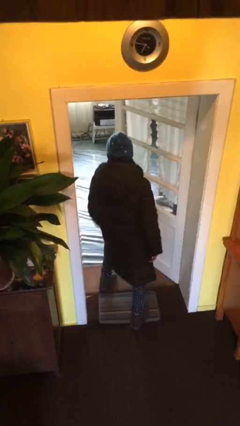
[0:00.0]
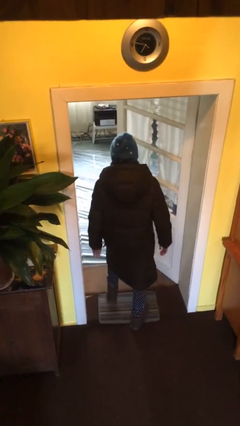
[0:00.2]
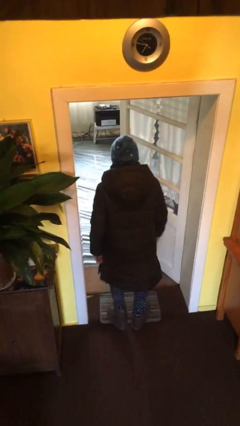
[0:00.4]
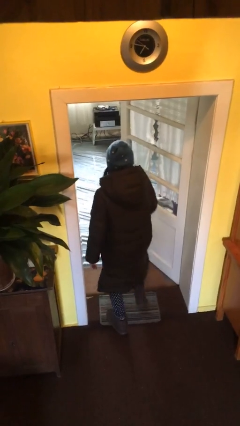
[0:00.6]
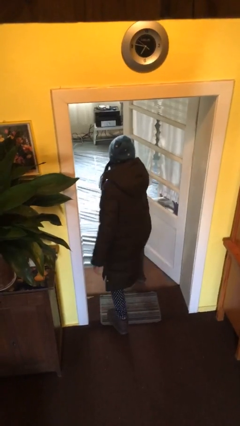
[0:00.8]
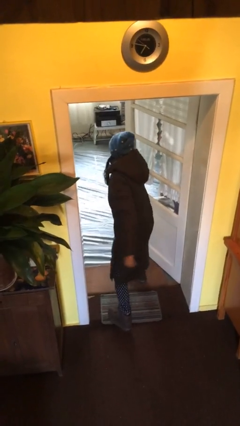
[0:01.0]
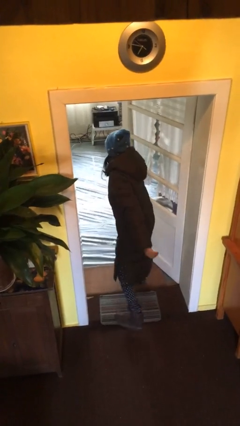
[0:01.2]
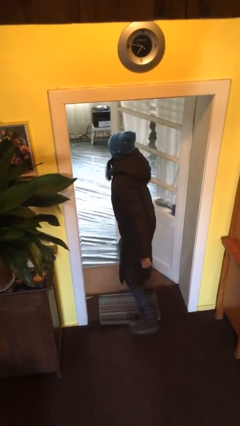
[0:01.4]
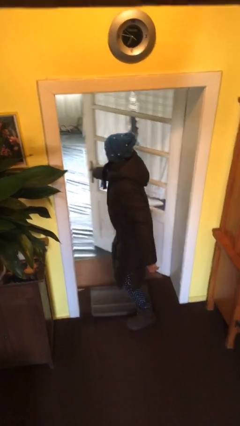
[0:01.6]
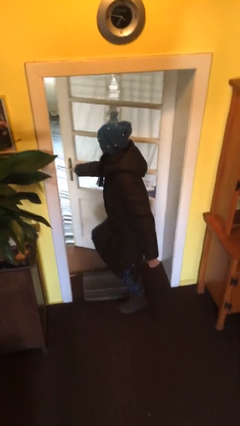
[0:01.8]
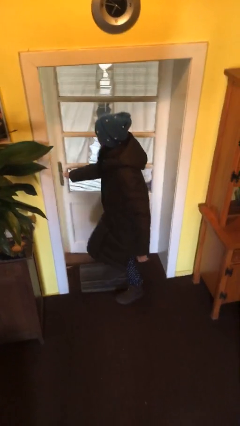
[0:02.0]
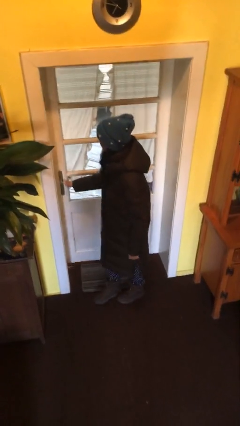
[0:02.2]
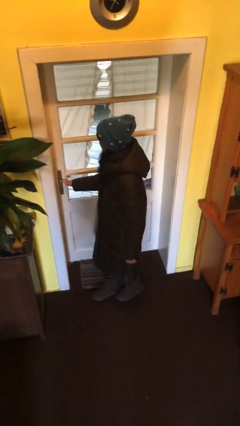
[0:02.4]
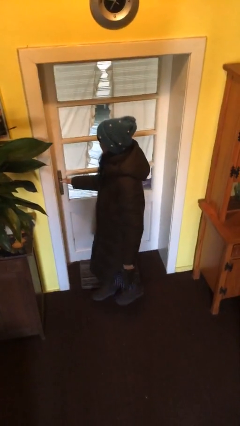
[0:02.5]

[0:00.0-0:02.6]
person closes facility door

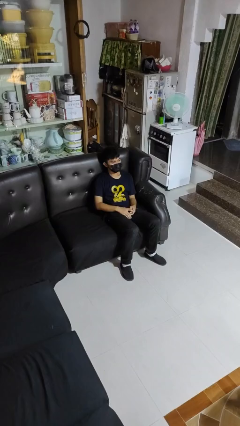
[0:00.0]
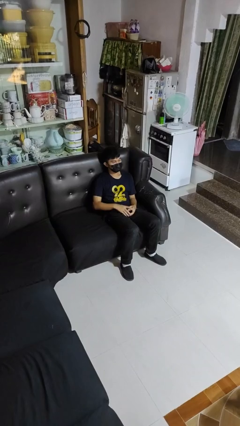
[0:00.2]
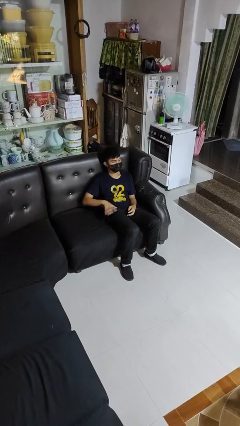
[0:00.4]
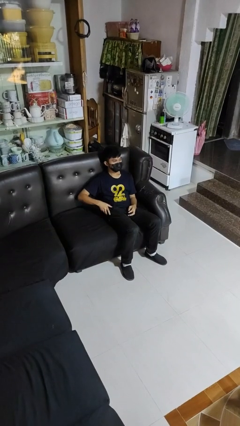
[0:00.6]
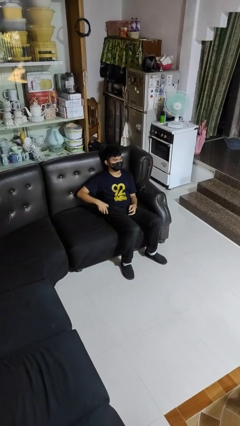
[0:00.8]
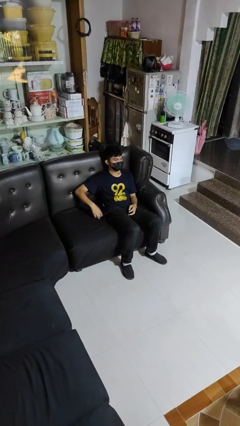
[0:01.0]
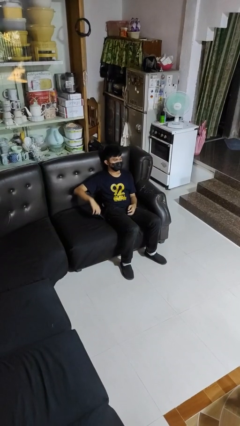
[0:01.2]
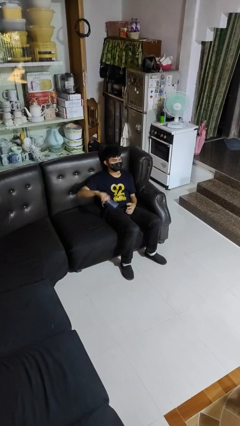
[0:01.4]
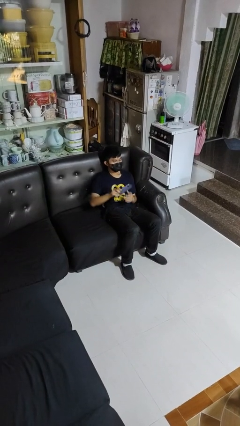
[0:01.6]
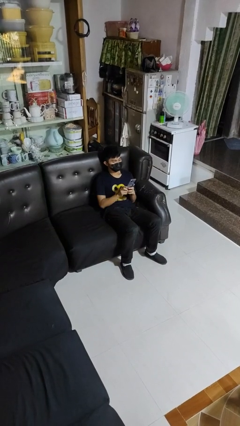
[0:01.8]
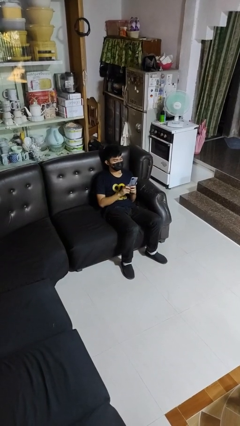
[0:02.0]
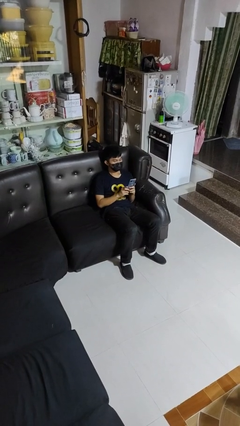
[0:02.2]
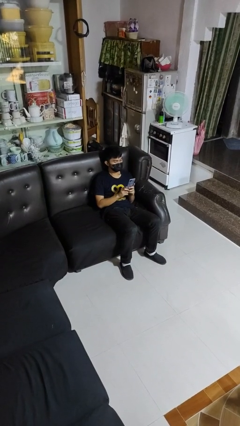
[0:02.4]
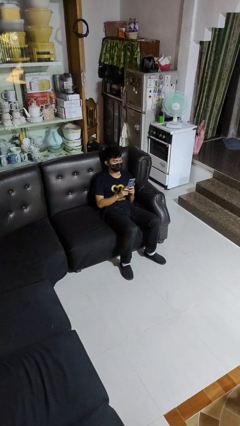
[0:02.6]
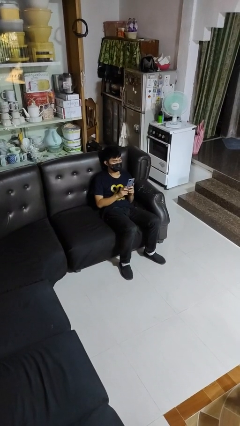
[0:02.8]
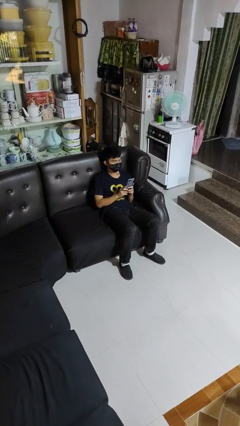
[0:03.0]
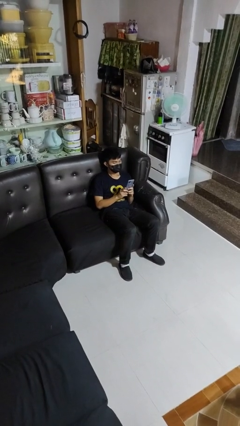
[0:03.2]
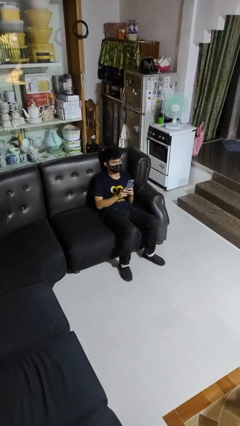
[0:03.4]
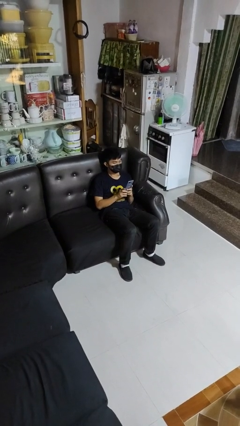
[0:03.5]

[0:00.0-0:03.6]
person takes phone from pocket

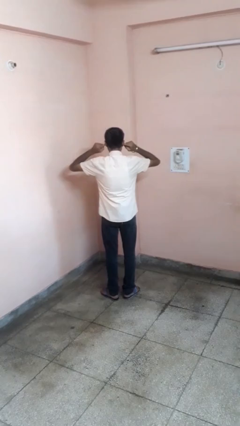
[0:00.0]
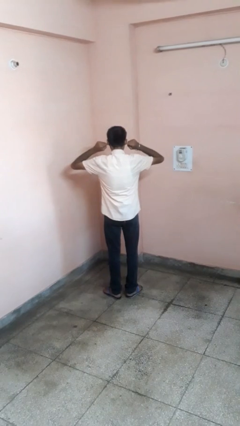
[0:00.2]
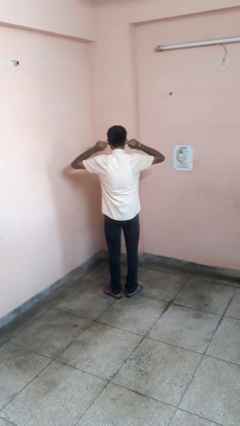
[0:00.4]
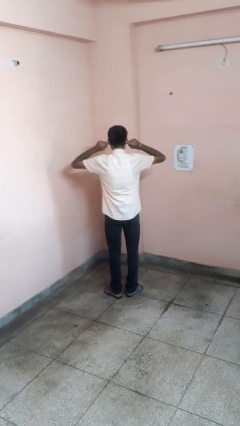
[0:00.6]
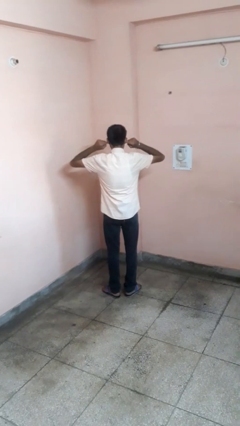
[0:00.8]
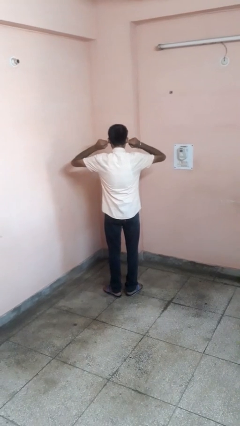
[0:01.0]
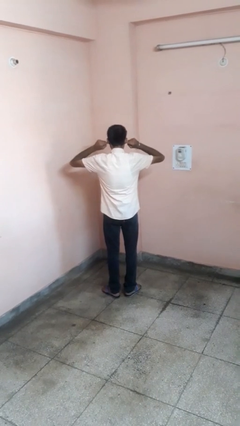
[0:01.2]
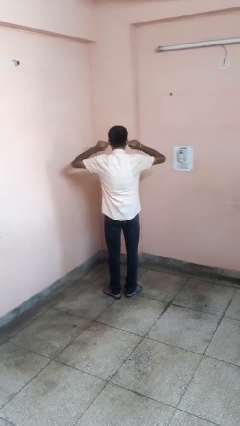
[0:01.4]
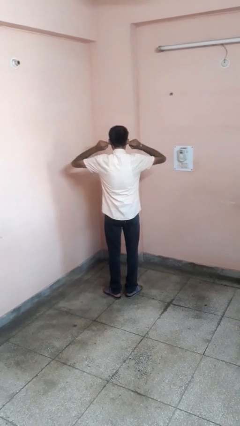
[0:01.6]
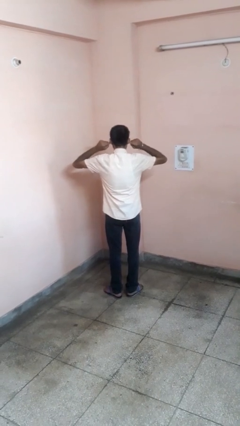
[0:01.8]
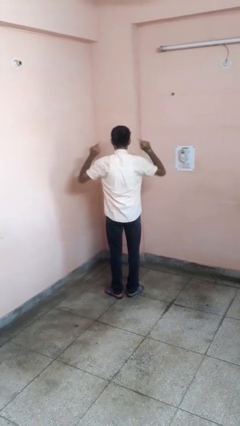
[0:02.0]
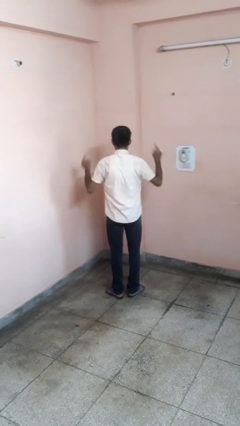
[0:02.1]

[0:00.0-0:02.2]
person puts fingers in ear

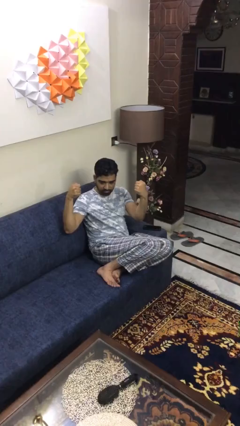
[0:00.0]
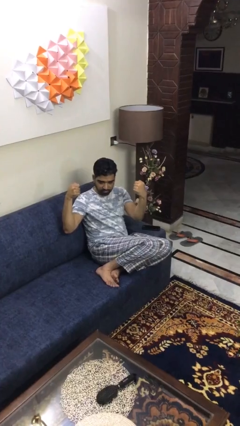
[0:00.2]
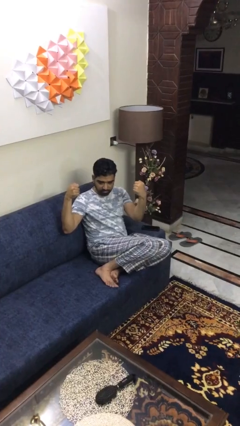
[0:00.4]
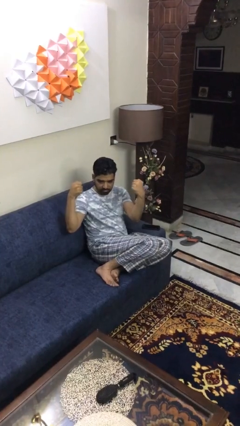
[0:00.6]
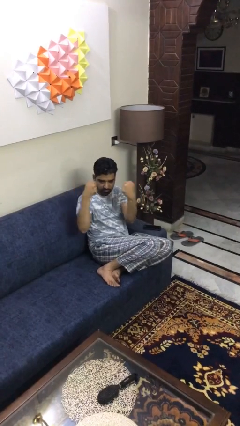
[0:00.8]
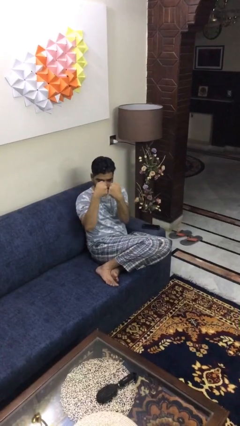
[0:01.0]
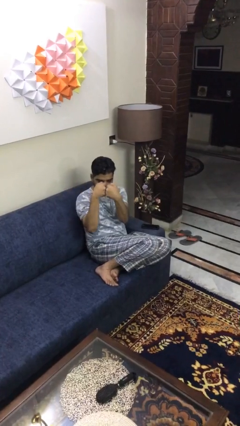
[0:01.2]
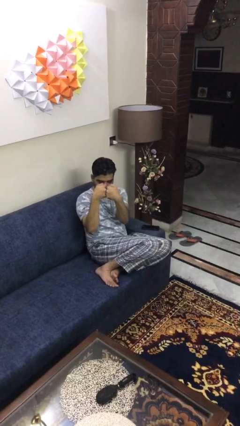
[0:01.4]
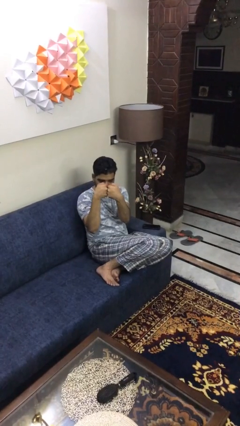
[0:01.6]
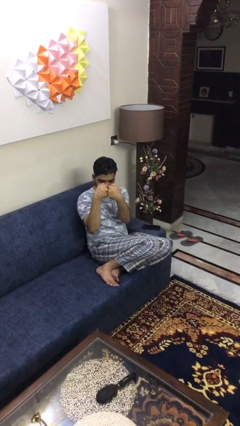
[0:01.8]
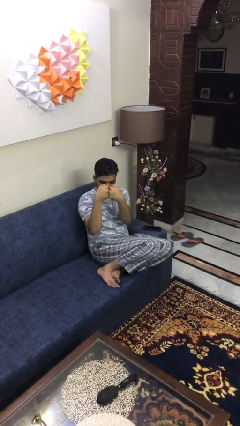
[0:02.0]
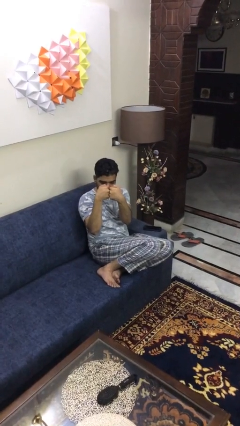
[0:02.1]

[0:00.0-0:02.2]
person gestures zoom out

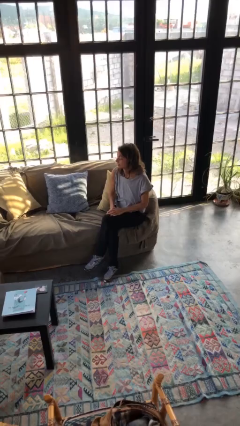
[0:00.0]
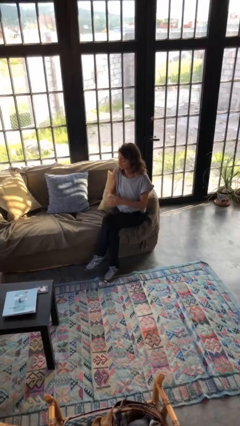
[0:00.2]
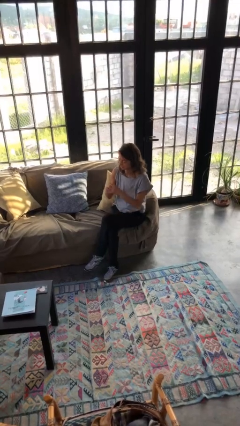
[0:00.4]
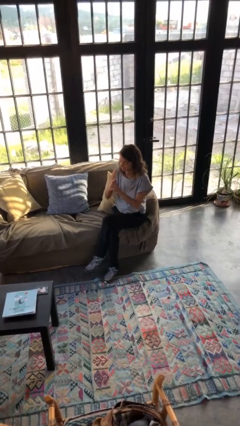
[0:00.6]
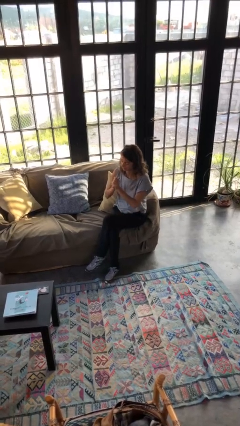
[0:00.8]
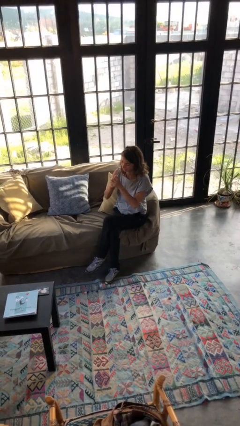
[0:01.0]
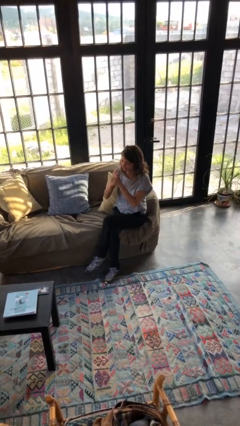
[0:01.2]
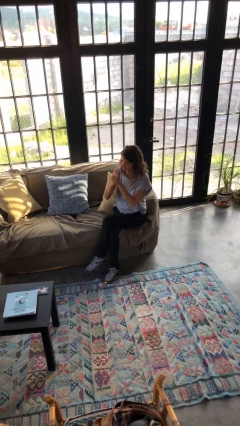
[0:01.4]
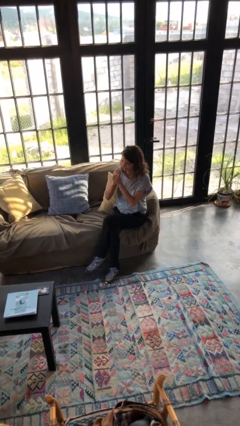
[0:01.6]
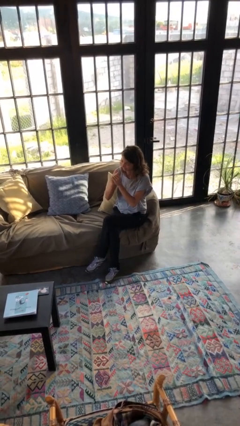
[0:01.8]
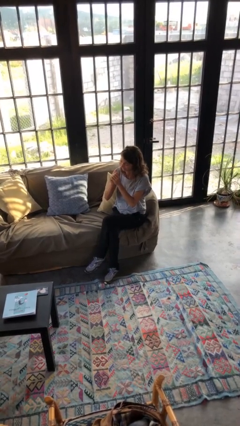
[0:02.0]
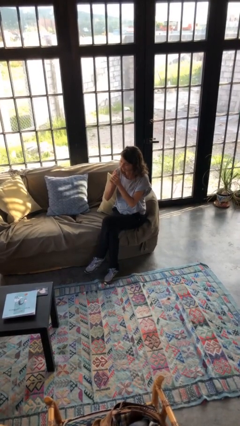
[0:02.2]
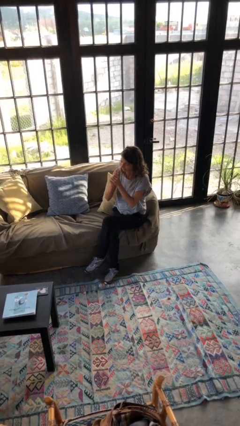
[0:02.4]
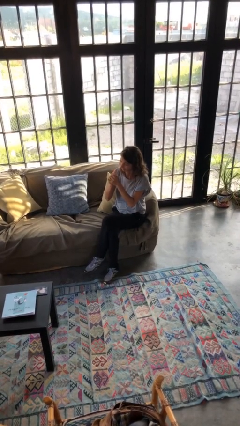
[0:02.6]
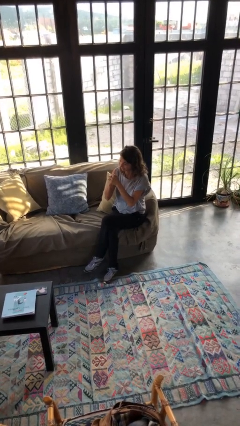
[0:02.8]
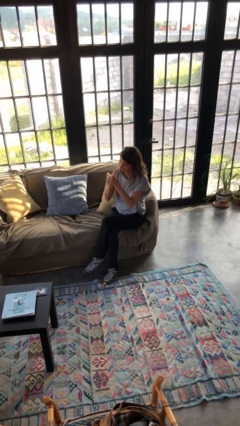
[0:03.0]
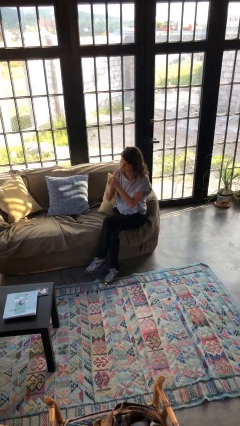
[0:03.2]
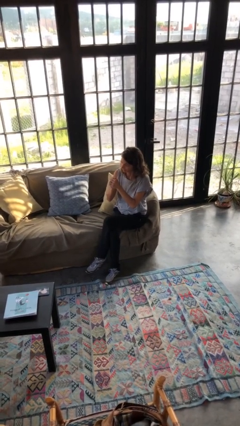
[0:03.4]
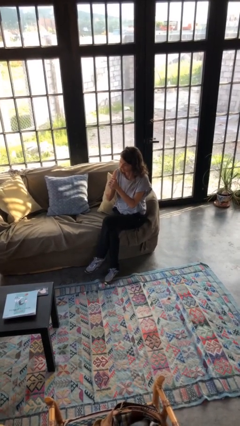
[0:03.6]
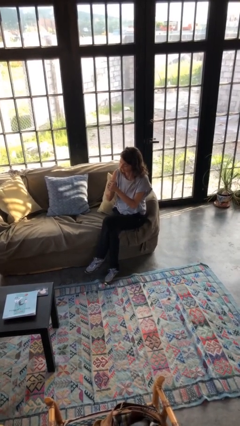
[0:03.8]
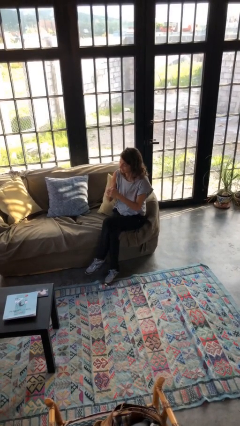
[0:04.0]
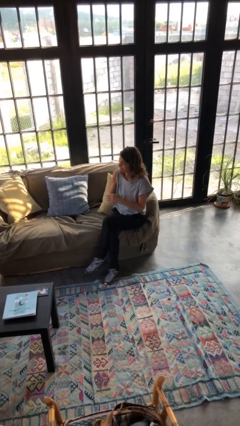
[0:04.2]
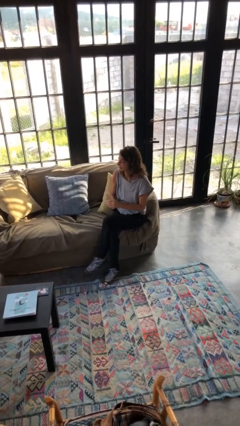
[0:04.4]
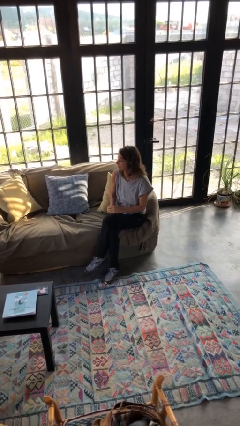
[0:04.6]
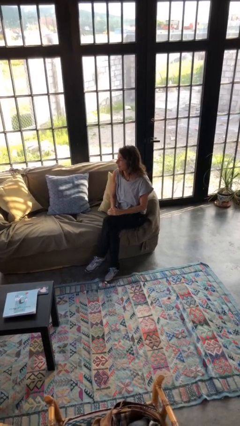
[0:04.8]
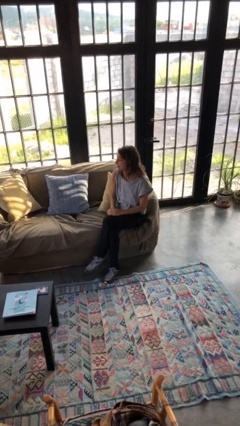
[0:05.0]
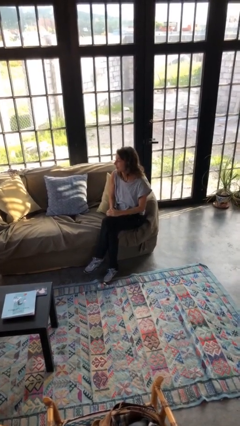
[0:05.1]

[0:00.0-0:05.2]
person cracks knuckles

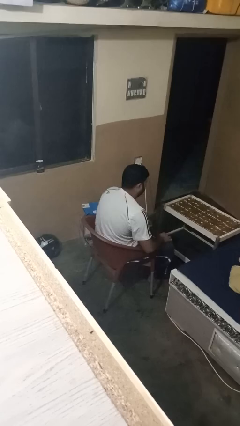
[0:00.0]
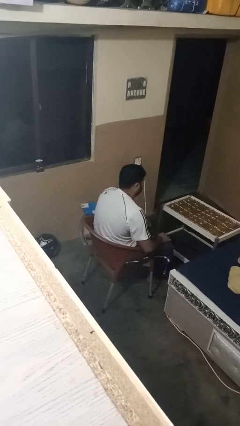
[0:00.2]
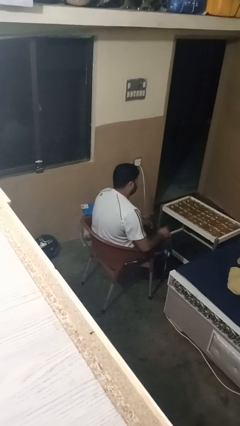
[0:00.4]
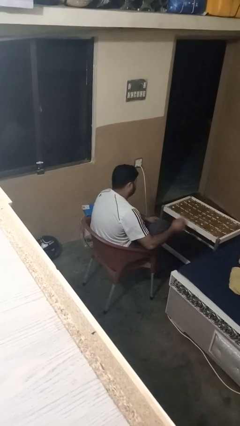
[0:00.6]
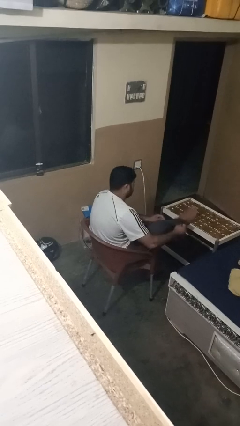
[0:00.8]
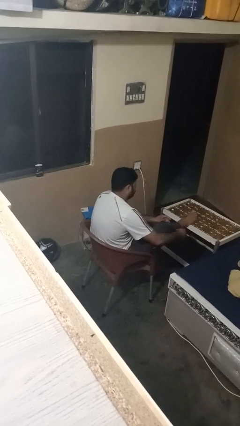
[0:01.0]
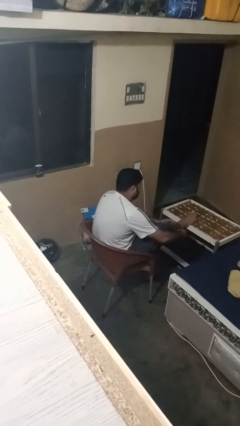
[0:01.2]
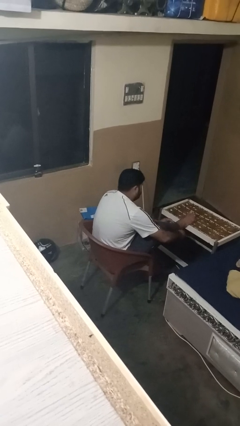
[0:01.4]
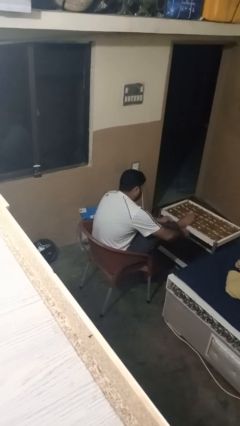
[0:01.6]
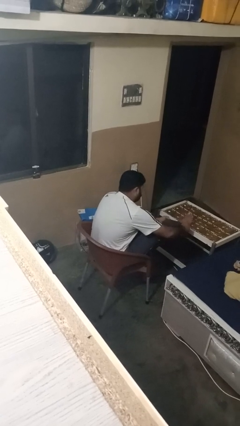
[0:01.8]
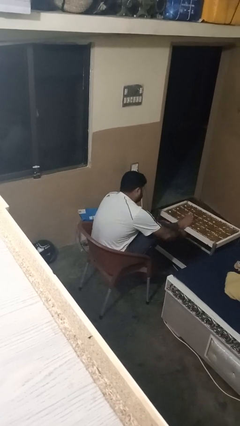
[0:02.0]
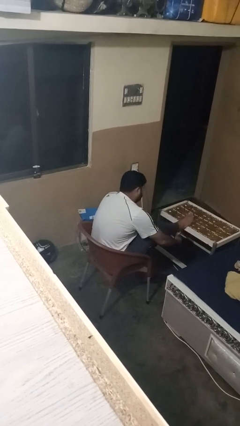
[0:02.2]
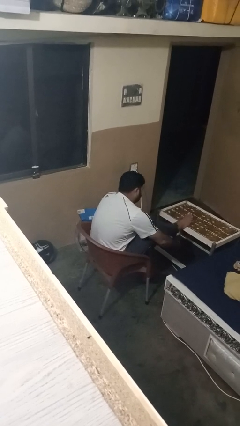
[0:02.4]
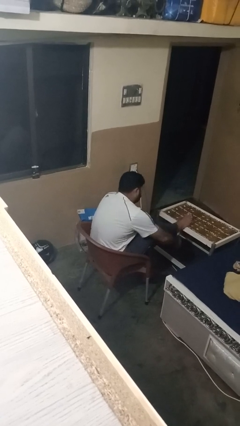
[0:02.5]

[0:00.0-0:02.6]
person hikes up pants
